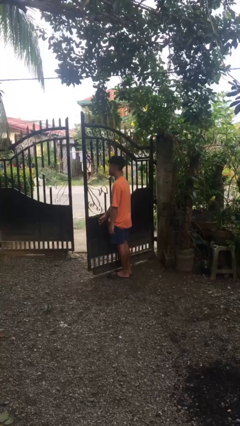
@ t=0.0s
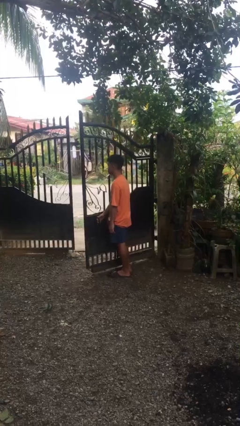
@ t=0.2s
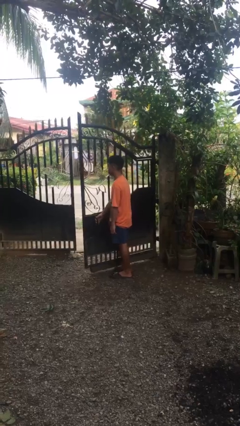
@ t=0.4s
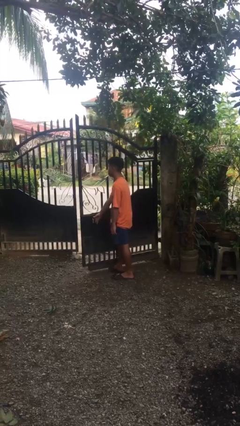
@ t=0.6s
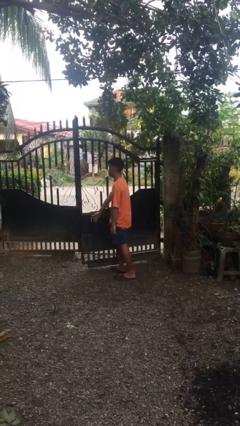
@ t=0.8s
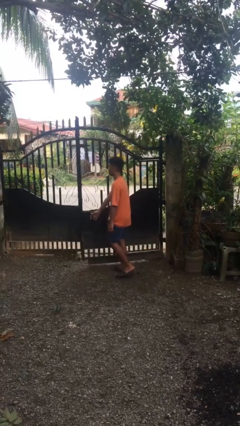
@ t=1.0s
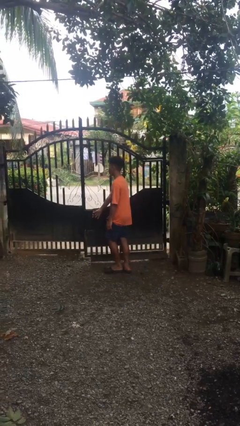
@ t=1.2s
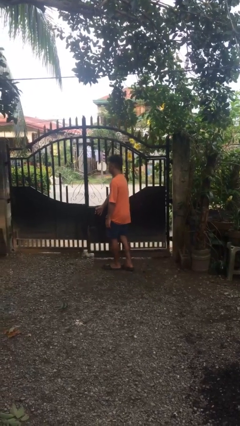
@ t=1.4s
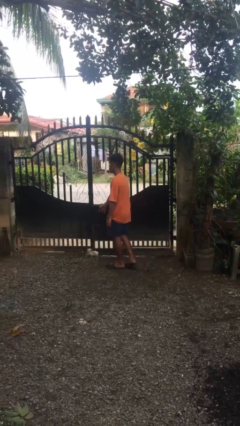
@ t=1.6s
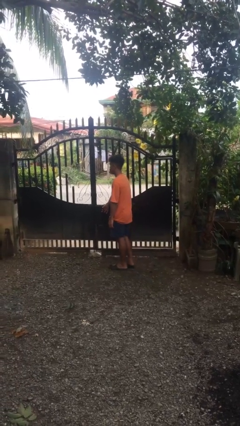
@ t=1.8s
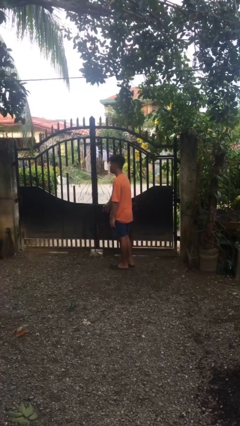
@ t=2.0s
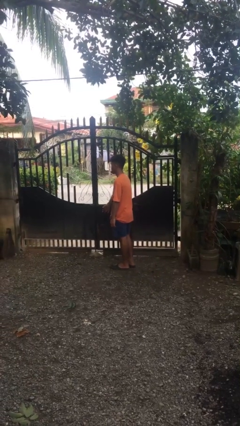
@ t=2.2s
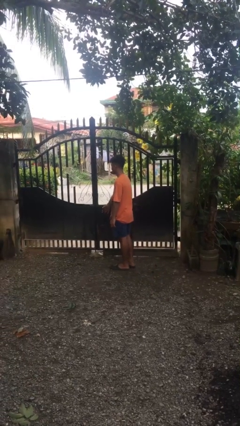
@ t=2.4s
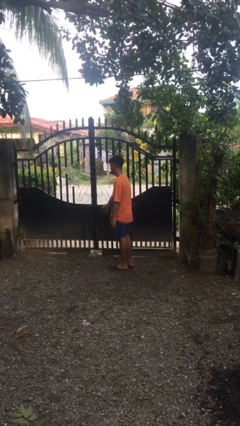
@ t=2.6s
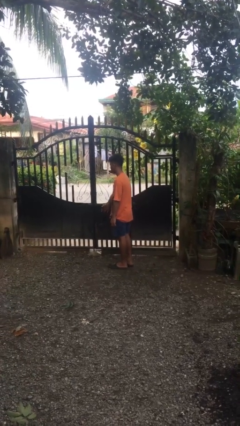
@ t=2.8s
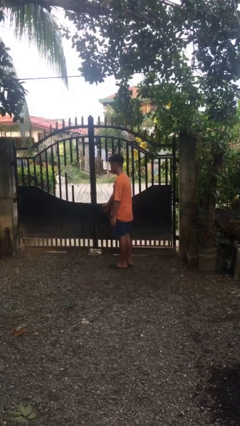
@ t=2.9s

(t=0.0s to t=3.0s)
person closes gate

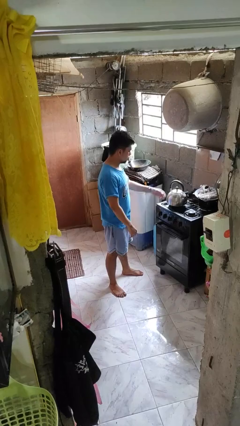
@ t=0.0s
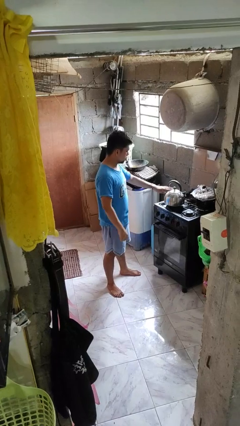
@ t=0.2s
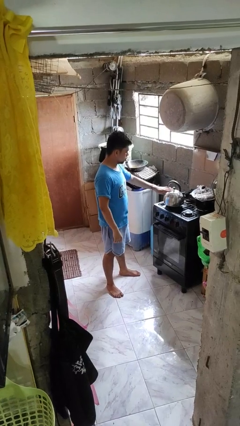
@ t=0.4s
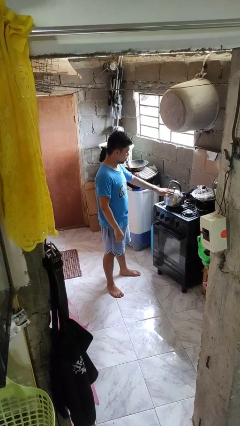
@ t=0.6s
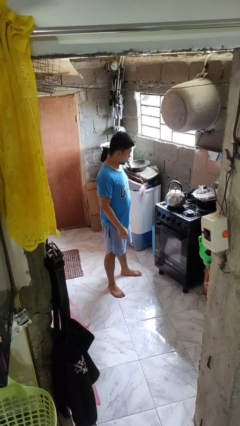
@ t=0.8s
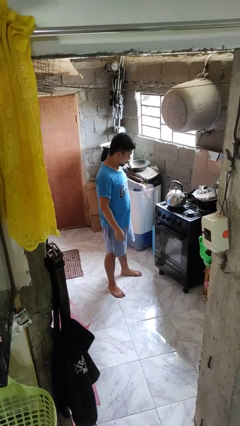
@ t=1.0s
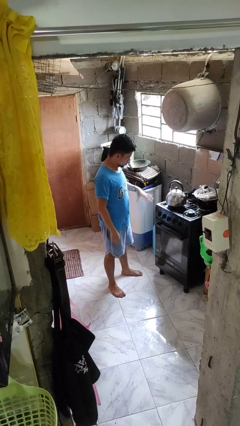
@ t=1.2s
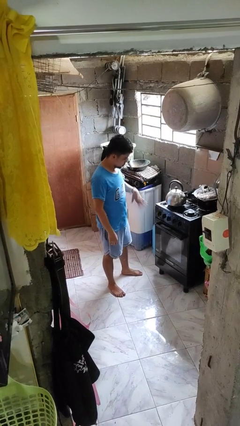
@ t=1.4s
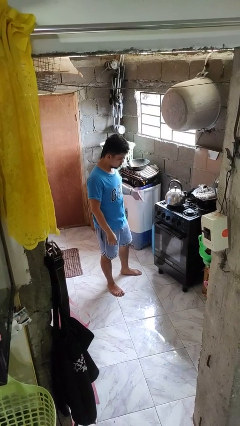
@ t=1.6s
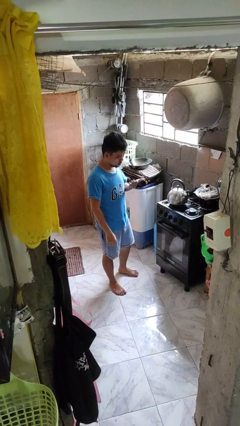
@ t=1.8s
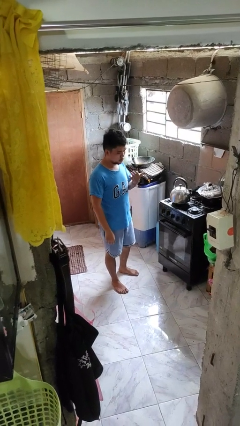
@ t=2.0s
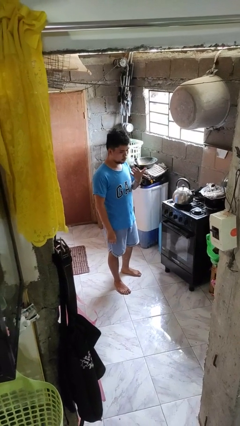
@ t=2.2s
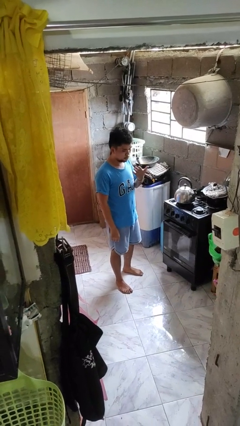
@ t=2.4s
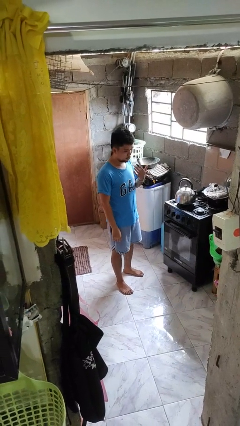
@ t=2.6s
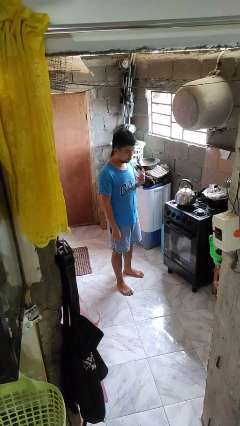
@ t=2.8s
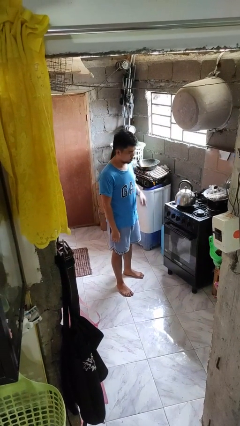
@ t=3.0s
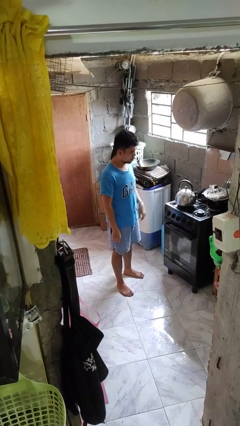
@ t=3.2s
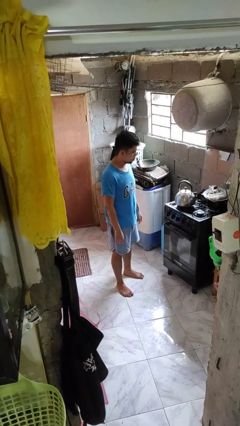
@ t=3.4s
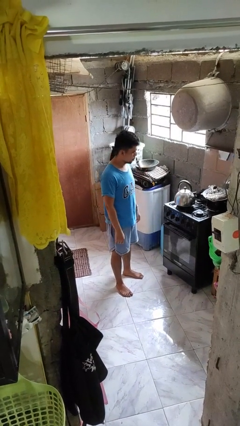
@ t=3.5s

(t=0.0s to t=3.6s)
person burns hand

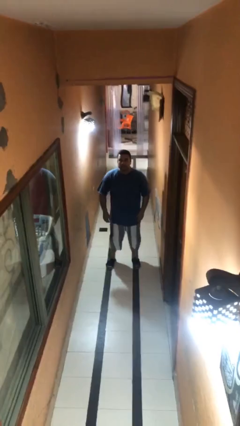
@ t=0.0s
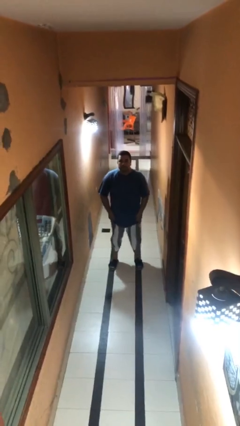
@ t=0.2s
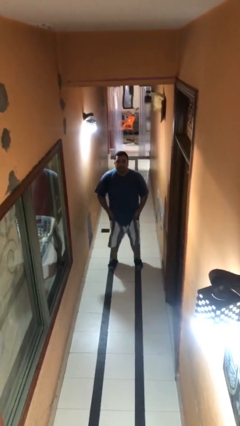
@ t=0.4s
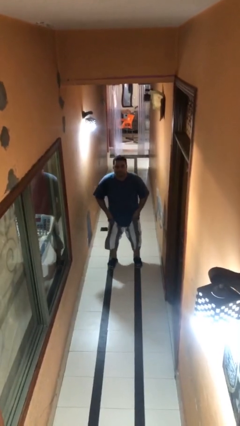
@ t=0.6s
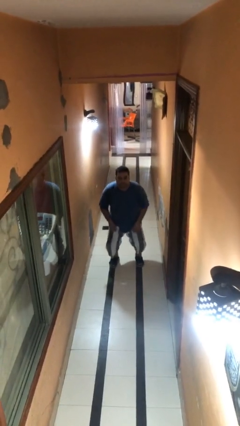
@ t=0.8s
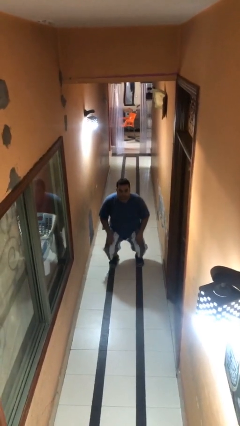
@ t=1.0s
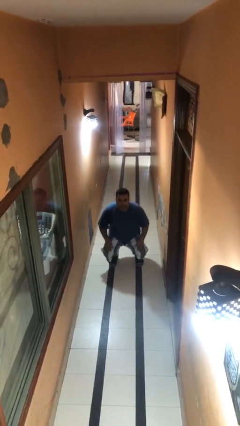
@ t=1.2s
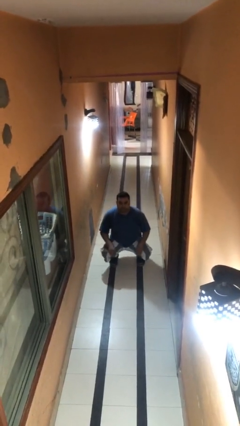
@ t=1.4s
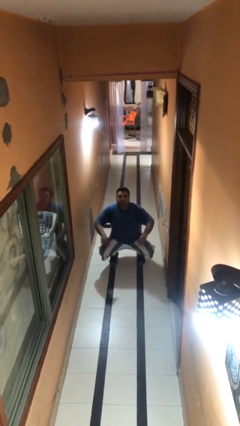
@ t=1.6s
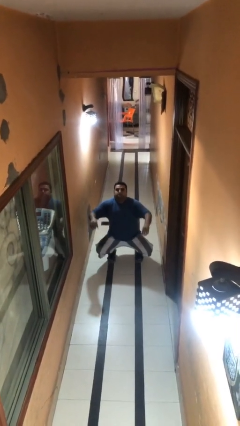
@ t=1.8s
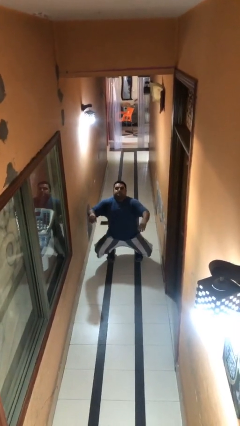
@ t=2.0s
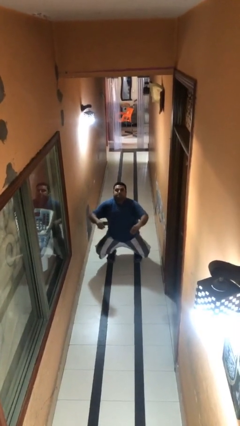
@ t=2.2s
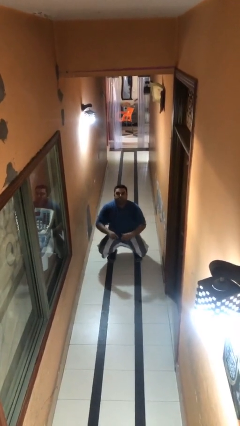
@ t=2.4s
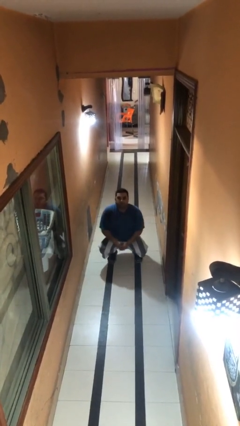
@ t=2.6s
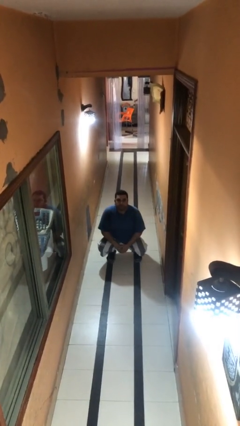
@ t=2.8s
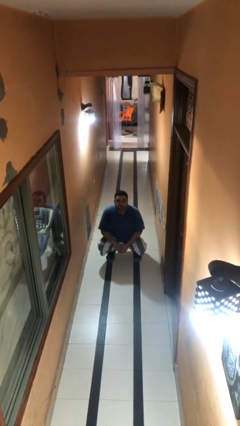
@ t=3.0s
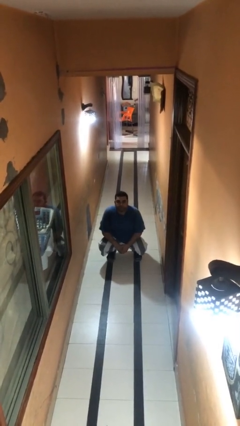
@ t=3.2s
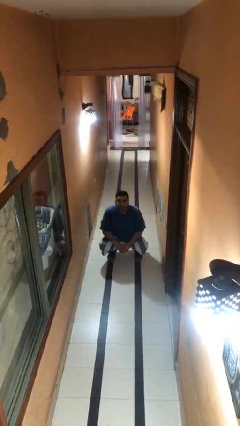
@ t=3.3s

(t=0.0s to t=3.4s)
person squats

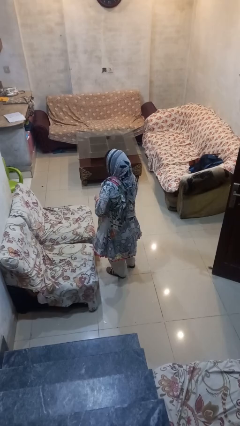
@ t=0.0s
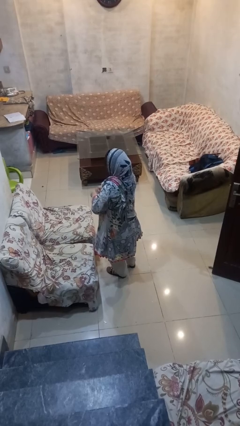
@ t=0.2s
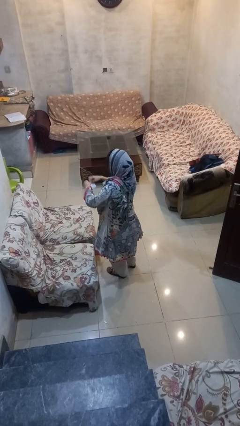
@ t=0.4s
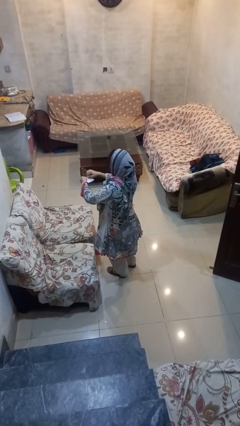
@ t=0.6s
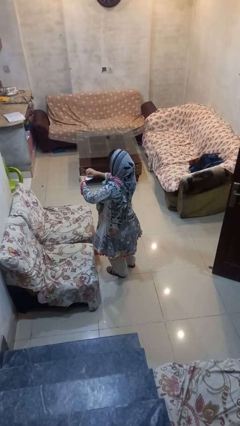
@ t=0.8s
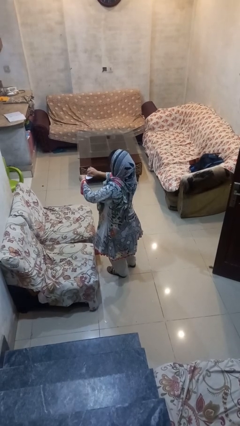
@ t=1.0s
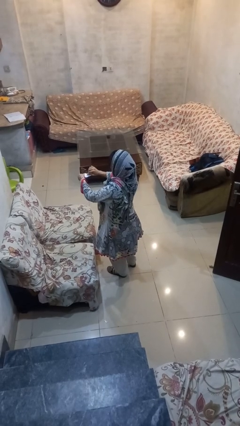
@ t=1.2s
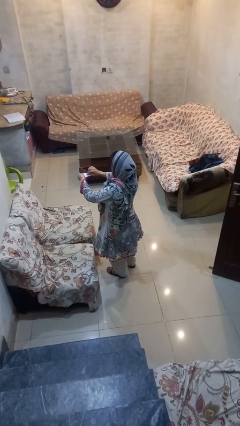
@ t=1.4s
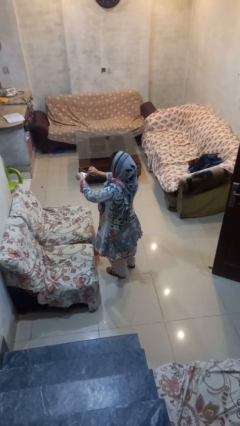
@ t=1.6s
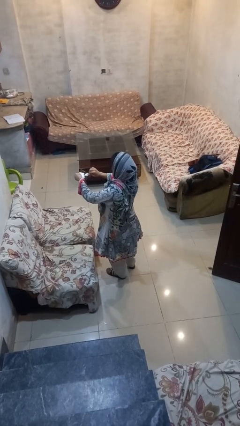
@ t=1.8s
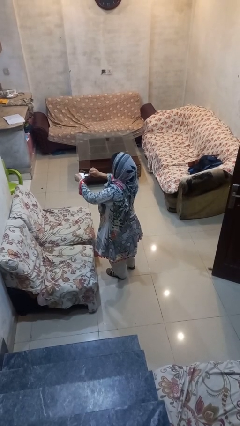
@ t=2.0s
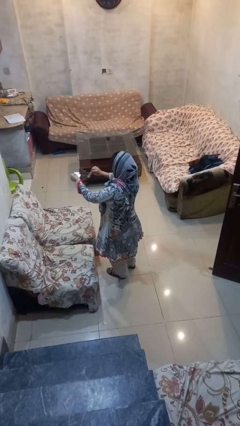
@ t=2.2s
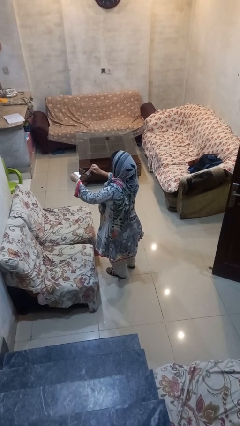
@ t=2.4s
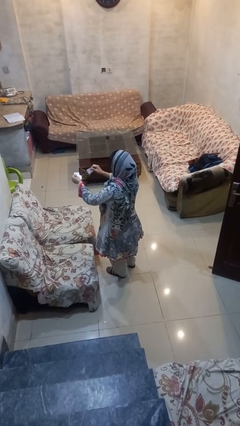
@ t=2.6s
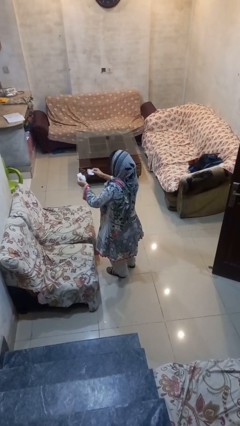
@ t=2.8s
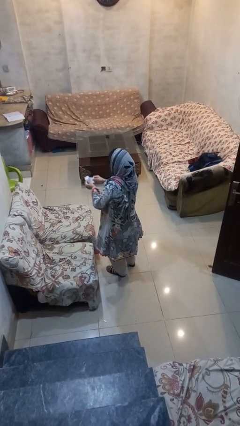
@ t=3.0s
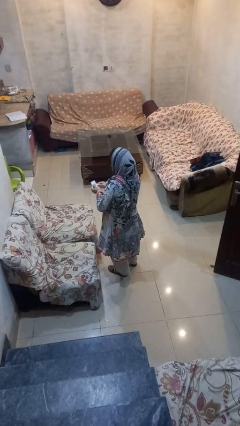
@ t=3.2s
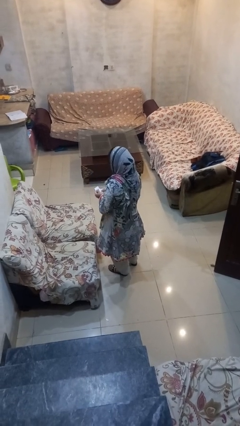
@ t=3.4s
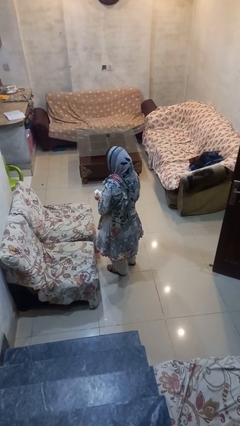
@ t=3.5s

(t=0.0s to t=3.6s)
person tears paper

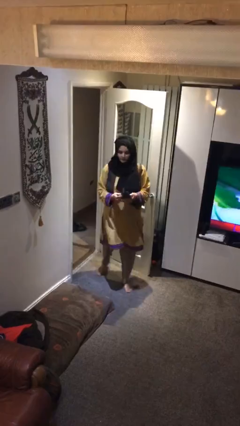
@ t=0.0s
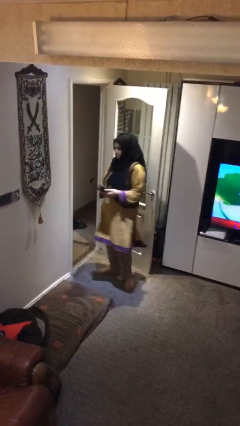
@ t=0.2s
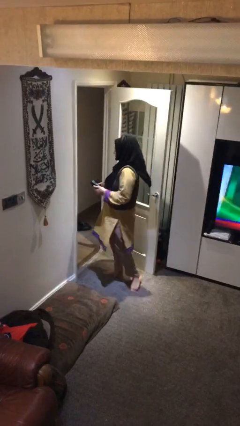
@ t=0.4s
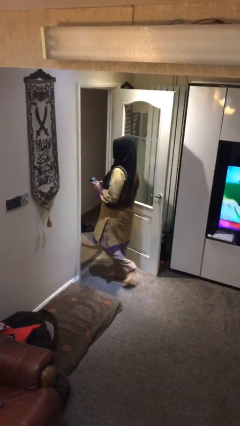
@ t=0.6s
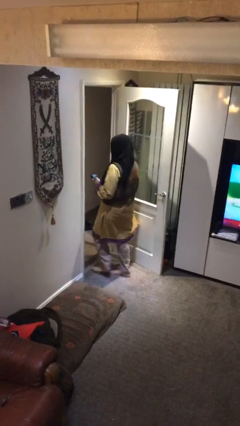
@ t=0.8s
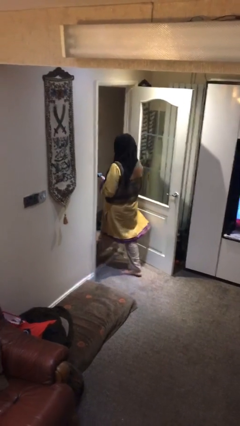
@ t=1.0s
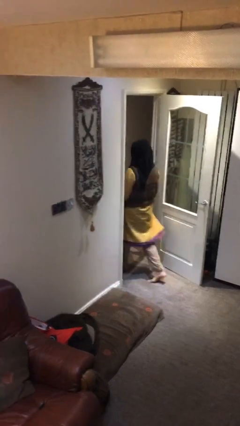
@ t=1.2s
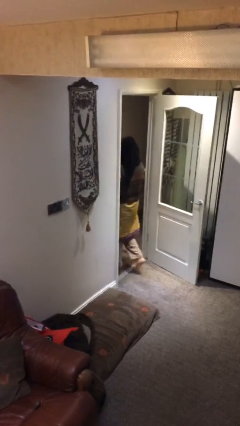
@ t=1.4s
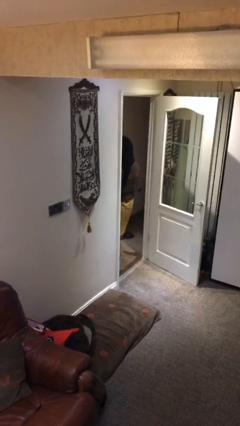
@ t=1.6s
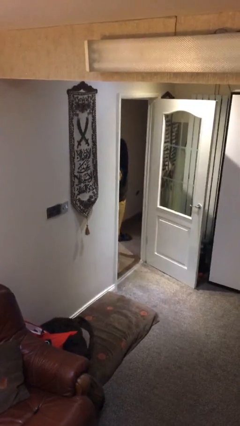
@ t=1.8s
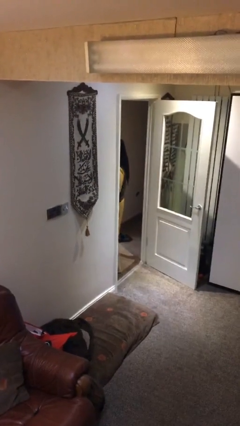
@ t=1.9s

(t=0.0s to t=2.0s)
person exits scene through structure

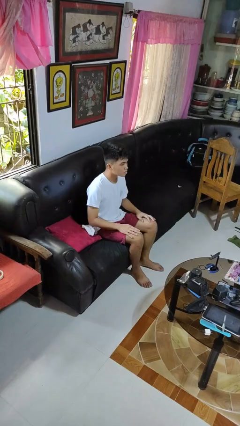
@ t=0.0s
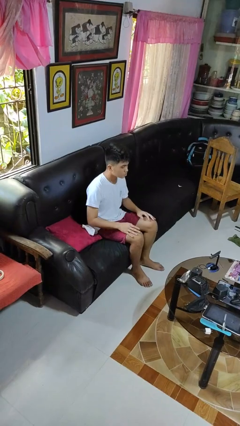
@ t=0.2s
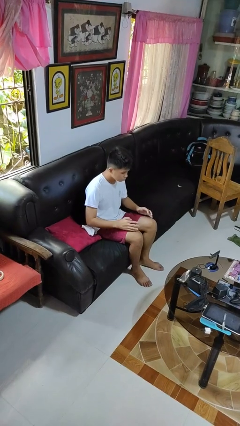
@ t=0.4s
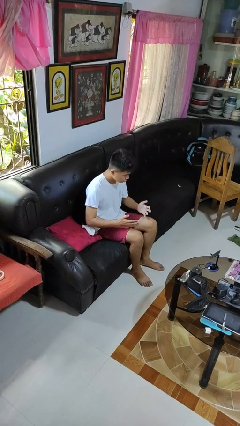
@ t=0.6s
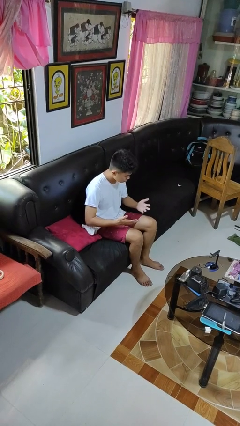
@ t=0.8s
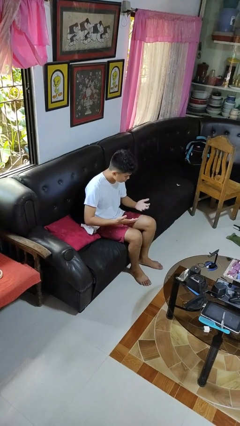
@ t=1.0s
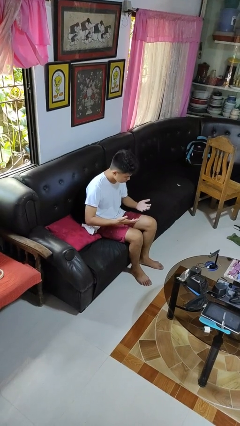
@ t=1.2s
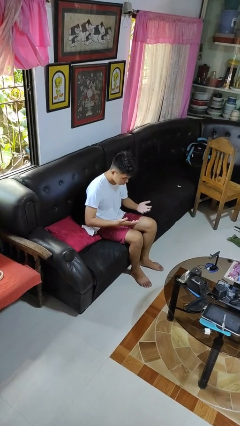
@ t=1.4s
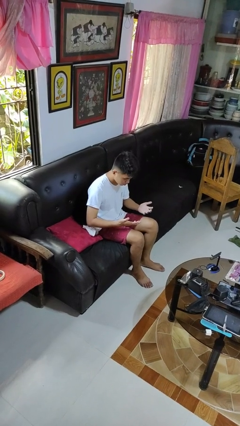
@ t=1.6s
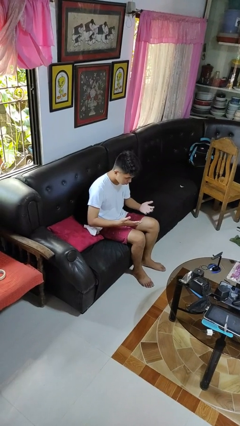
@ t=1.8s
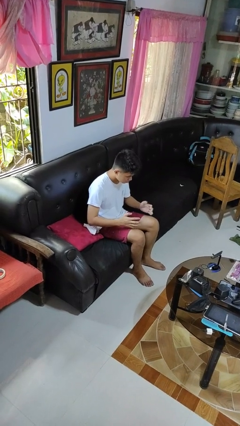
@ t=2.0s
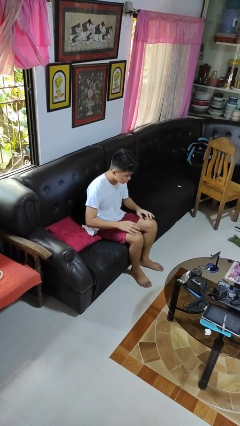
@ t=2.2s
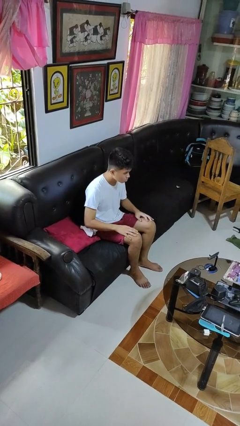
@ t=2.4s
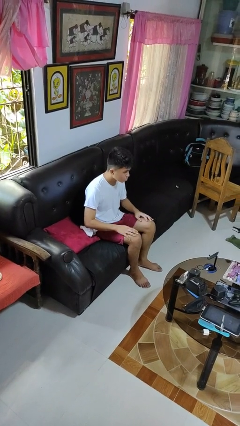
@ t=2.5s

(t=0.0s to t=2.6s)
person looks at hands in lap
